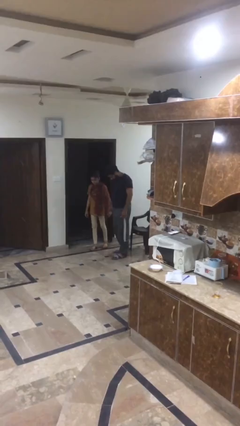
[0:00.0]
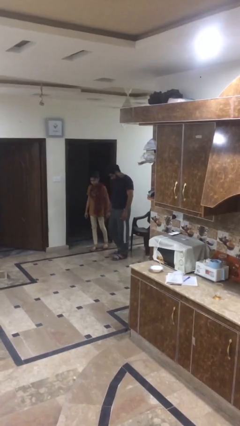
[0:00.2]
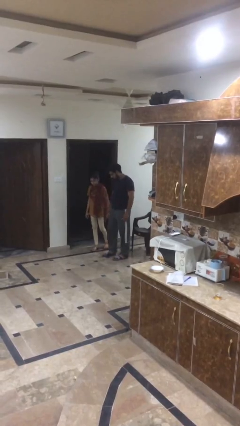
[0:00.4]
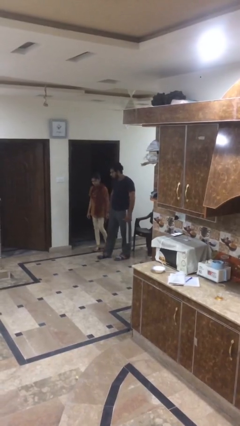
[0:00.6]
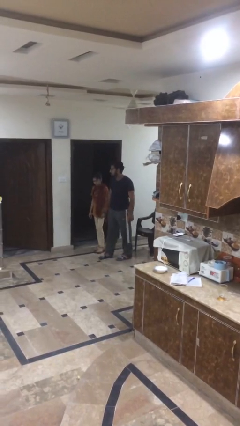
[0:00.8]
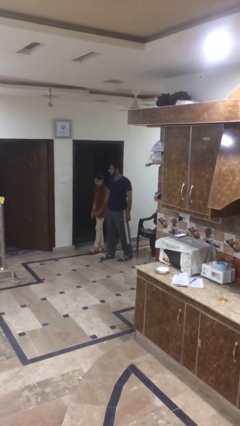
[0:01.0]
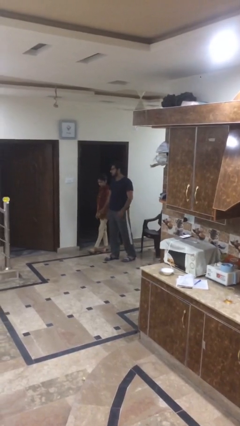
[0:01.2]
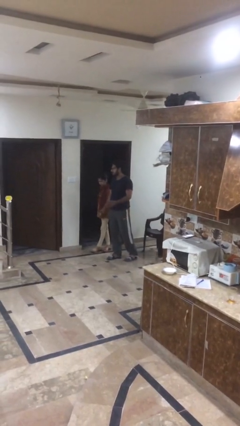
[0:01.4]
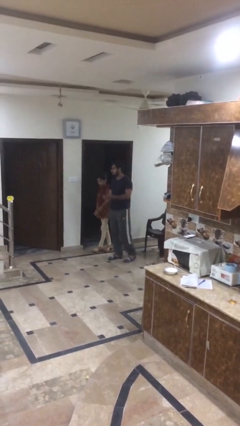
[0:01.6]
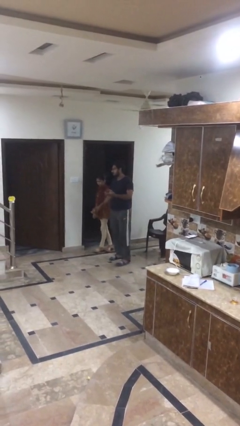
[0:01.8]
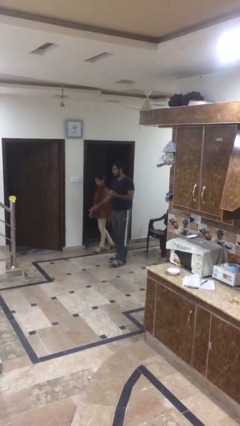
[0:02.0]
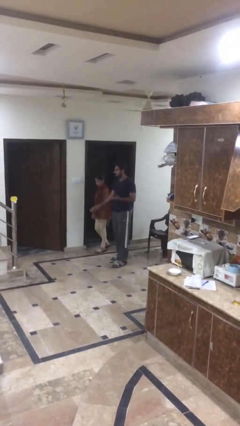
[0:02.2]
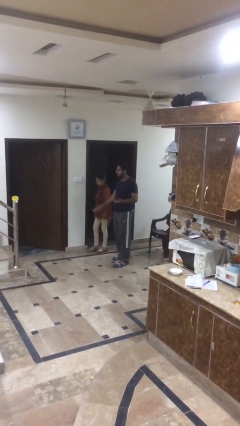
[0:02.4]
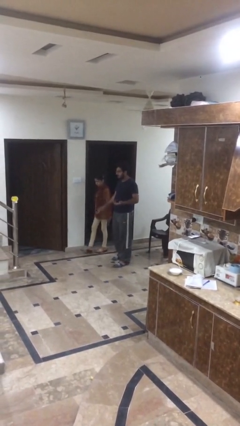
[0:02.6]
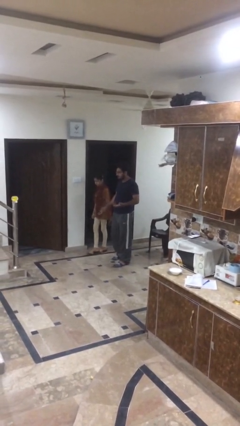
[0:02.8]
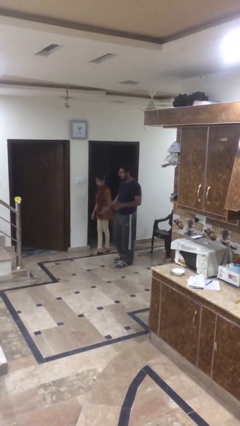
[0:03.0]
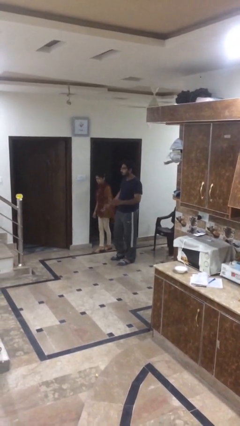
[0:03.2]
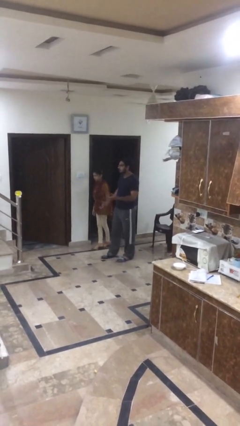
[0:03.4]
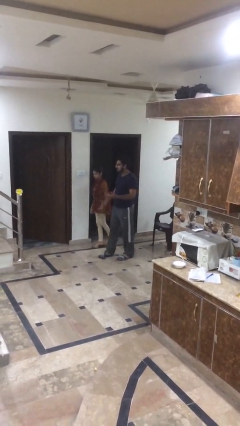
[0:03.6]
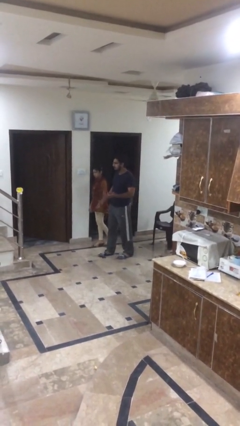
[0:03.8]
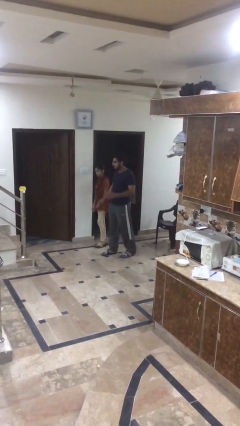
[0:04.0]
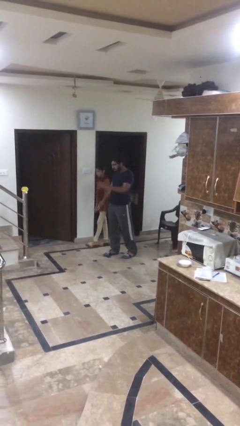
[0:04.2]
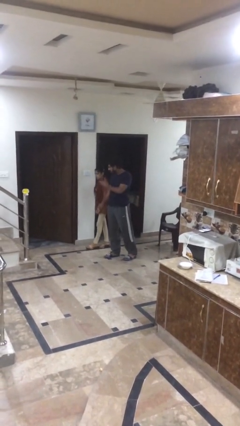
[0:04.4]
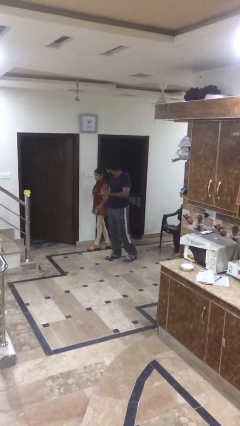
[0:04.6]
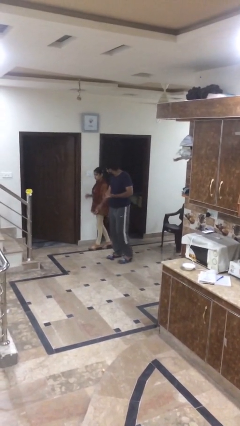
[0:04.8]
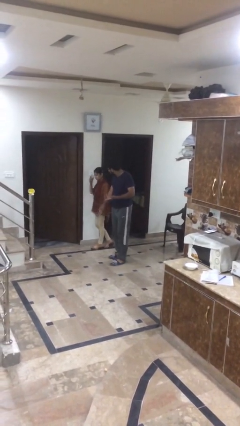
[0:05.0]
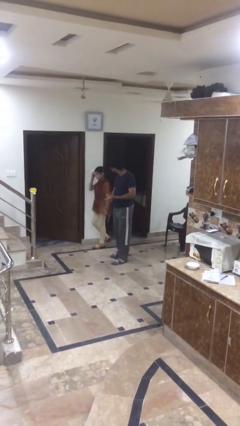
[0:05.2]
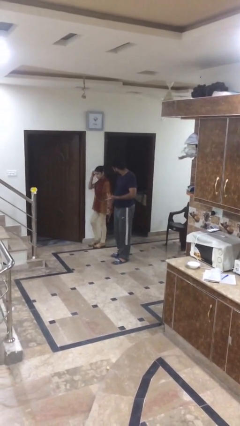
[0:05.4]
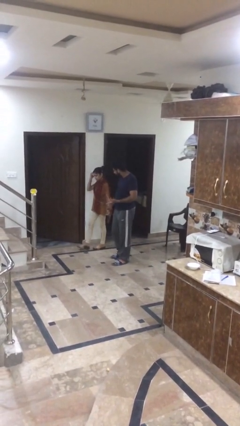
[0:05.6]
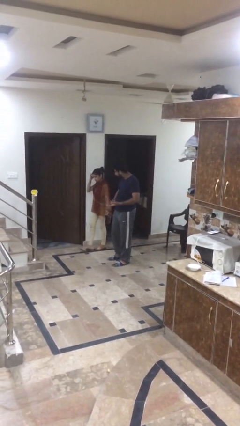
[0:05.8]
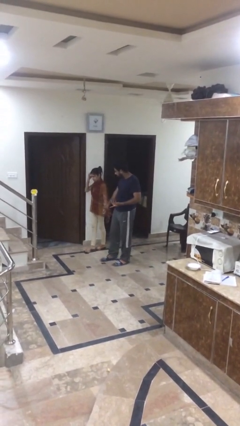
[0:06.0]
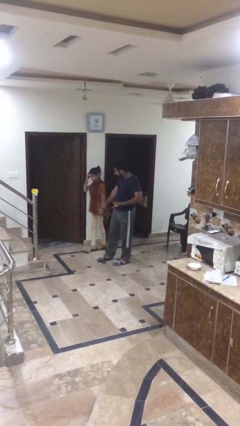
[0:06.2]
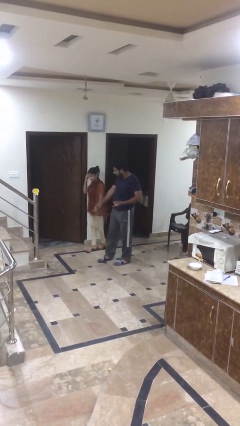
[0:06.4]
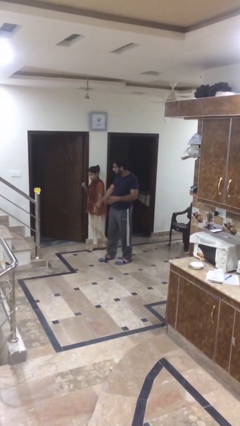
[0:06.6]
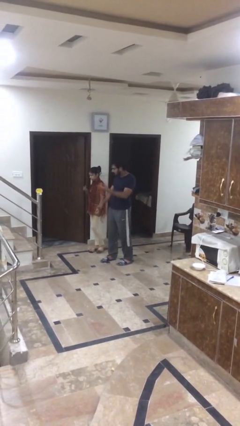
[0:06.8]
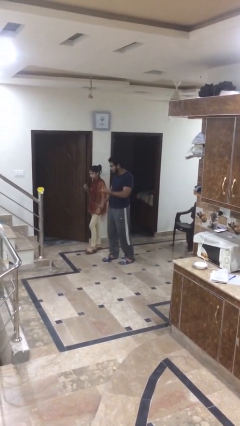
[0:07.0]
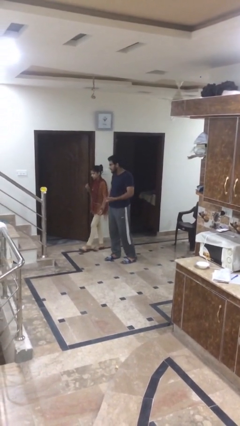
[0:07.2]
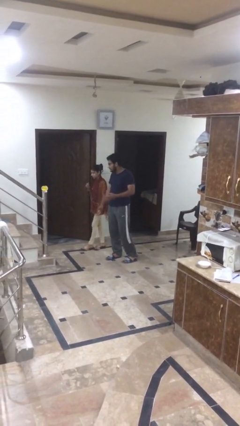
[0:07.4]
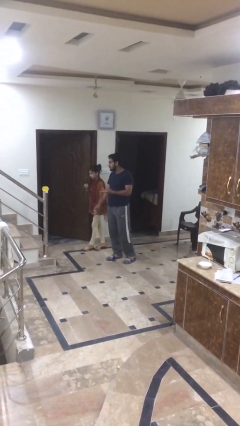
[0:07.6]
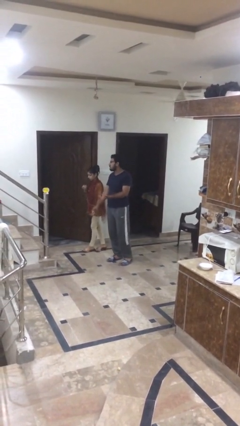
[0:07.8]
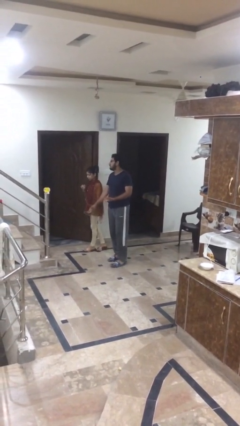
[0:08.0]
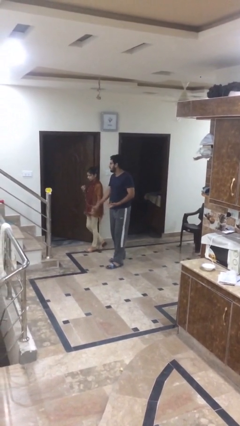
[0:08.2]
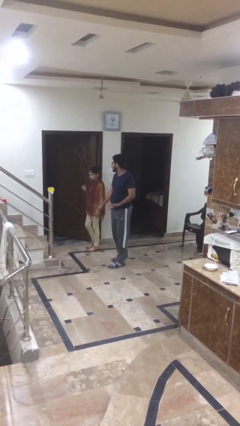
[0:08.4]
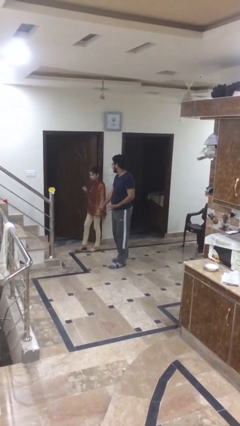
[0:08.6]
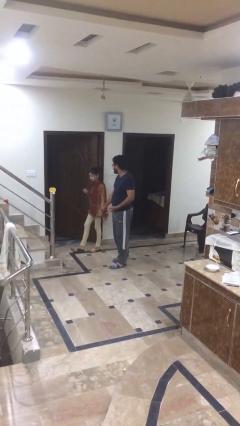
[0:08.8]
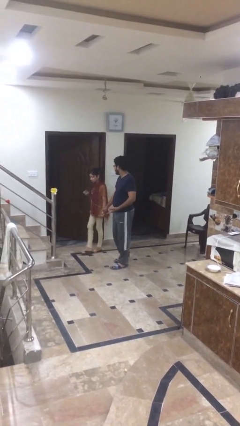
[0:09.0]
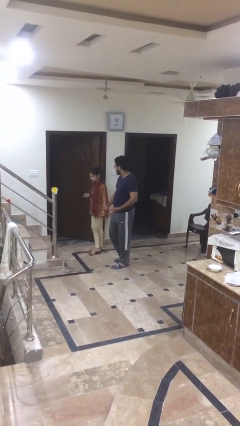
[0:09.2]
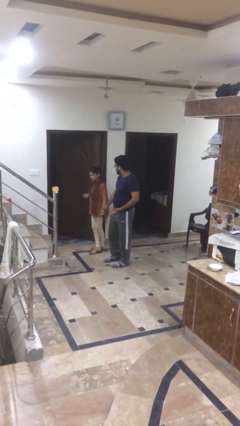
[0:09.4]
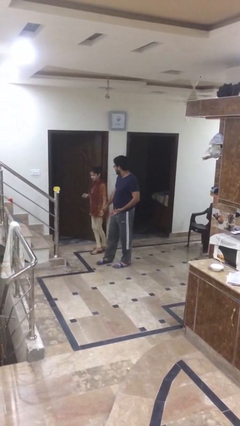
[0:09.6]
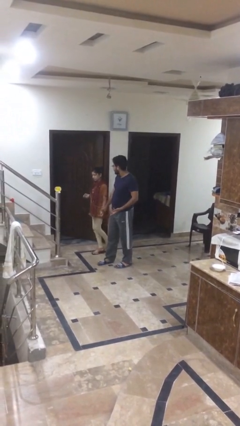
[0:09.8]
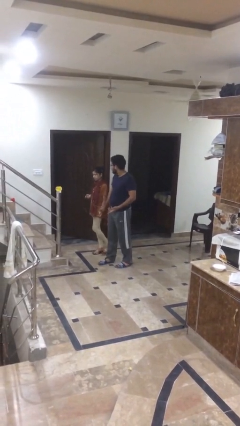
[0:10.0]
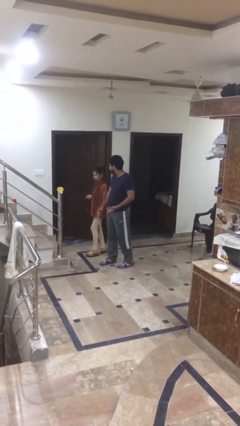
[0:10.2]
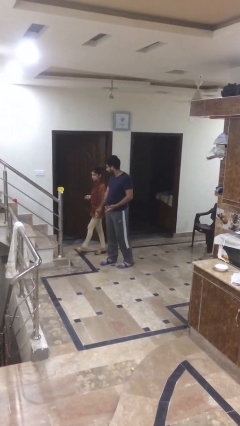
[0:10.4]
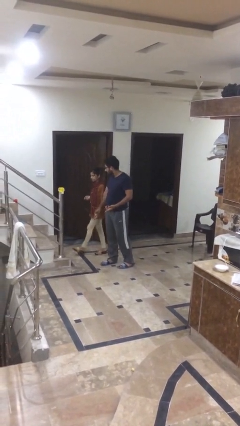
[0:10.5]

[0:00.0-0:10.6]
person holds hand

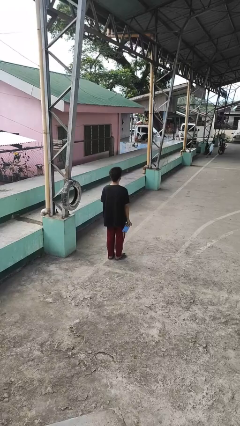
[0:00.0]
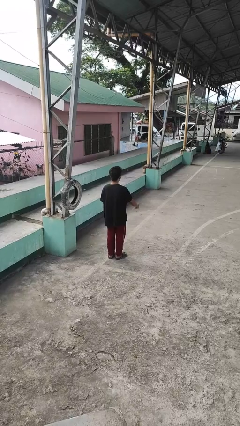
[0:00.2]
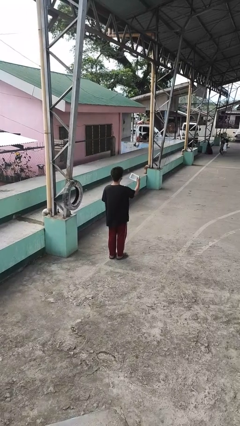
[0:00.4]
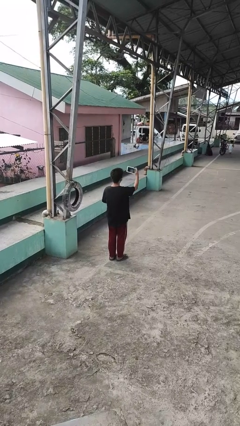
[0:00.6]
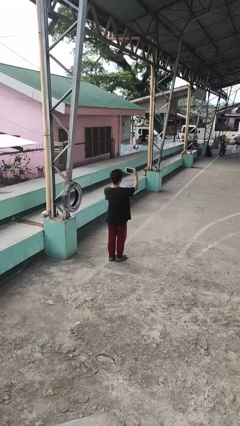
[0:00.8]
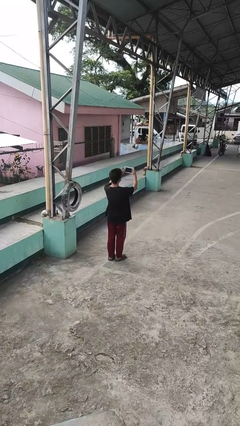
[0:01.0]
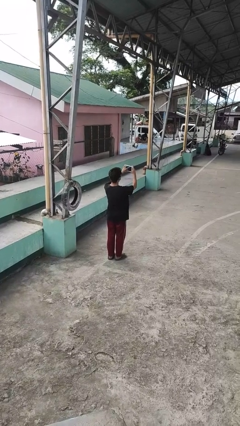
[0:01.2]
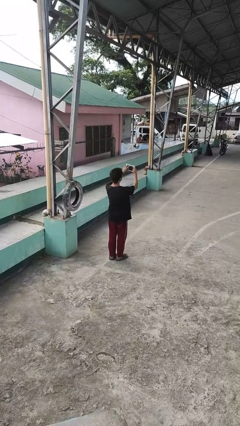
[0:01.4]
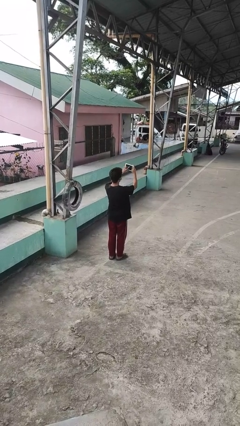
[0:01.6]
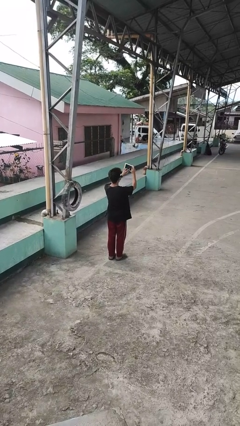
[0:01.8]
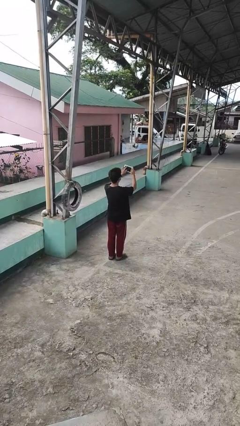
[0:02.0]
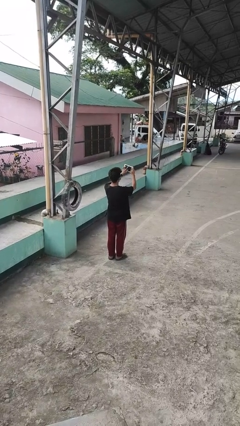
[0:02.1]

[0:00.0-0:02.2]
person interacts with tablet

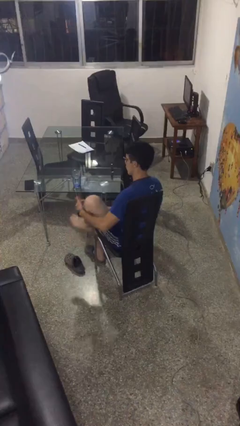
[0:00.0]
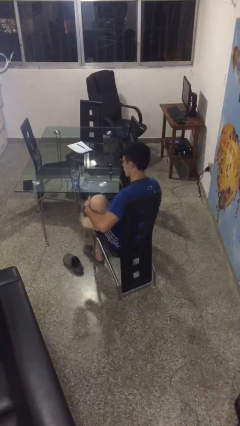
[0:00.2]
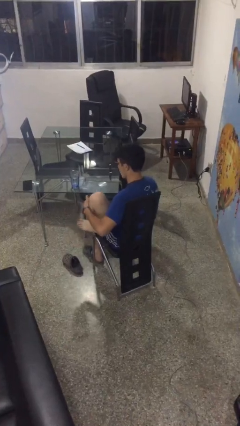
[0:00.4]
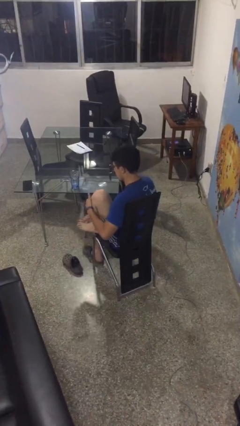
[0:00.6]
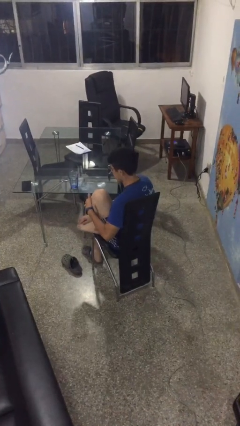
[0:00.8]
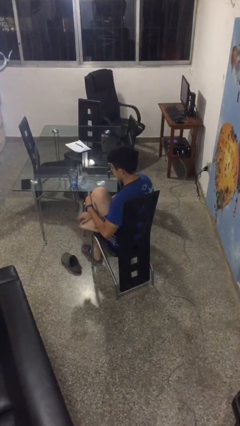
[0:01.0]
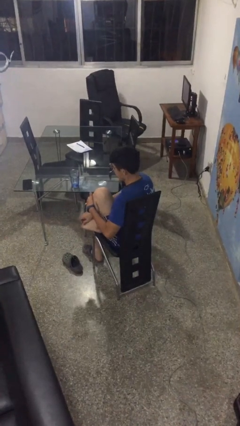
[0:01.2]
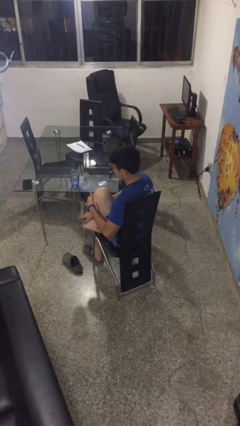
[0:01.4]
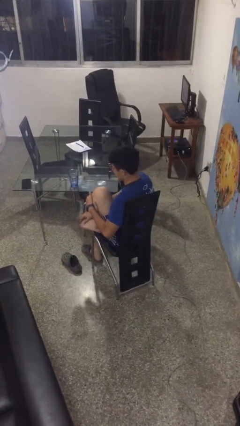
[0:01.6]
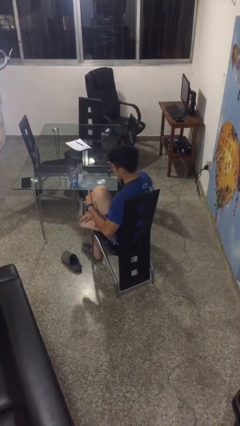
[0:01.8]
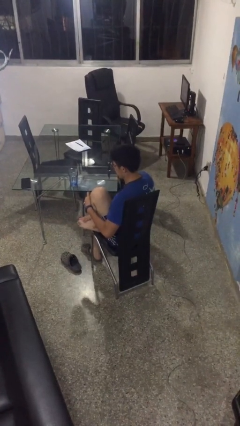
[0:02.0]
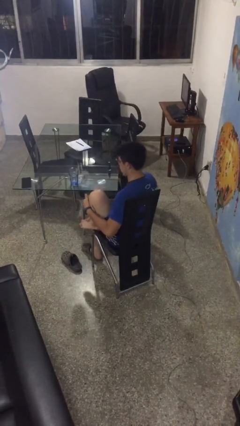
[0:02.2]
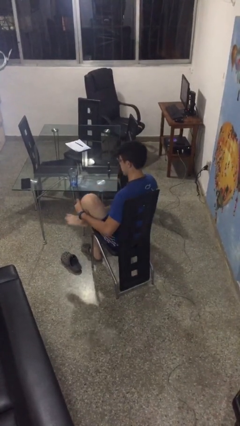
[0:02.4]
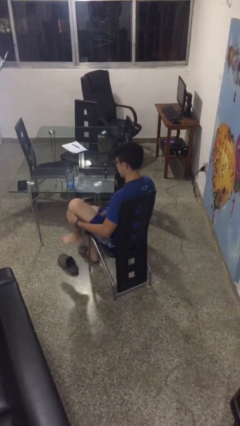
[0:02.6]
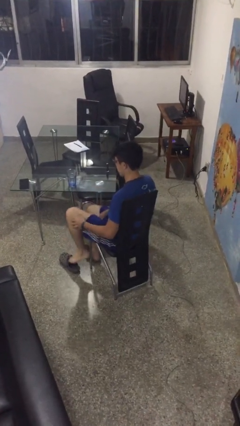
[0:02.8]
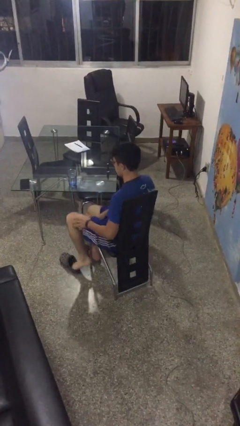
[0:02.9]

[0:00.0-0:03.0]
person rubs foot

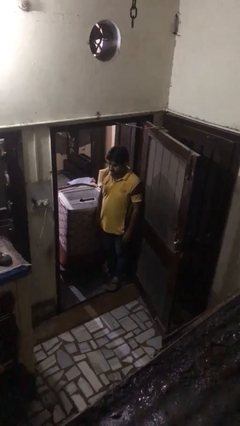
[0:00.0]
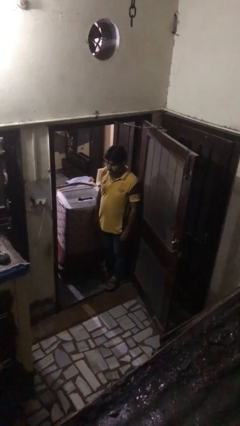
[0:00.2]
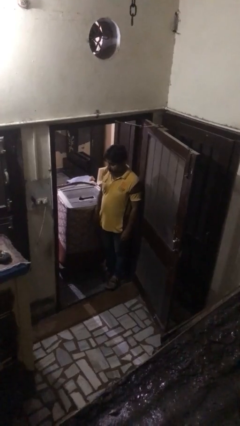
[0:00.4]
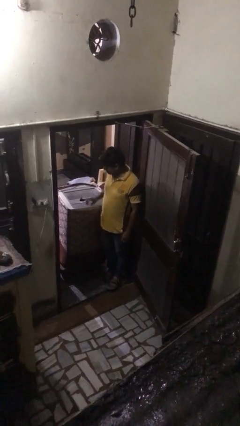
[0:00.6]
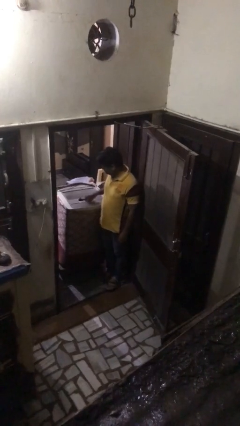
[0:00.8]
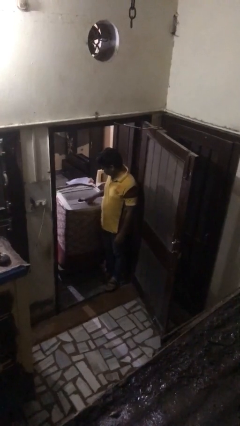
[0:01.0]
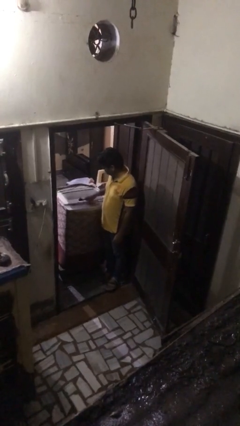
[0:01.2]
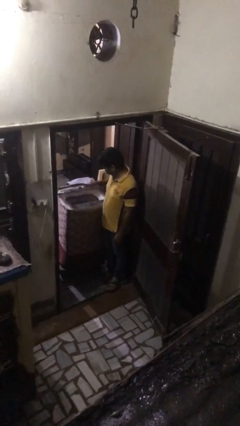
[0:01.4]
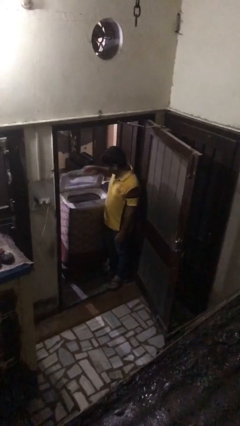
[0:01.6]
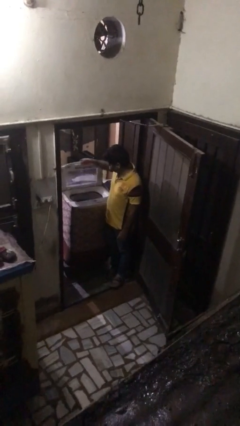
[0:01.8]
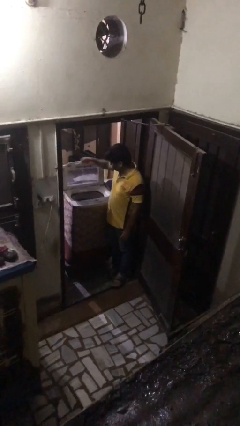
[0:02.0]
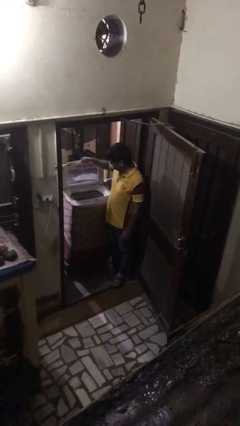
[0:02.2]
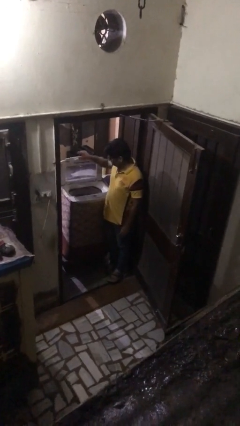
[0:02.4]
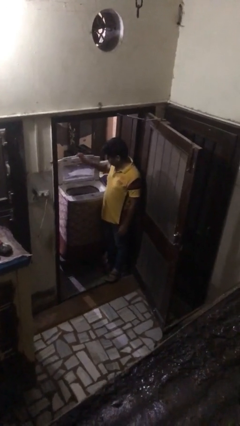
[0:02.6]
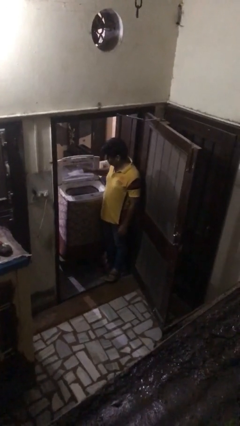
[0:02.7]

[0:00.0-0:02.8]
person opens clothes washer
